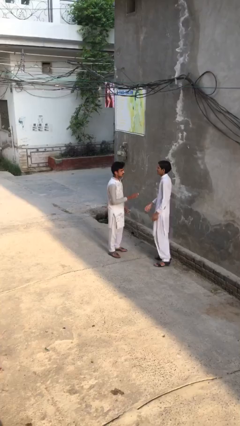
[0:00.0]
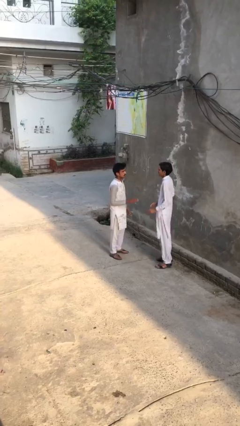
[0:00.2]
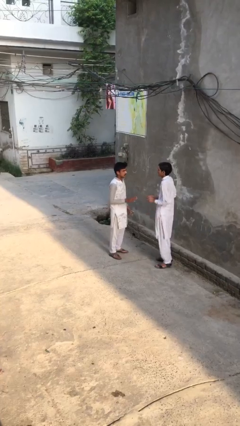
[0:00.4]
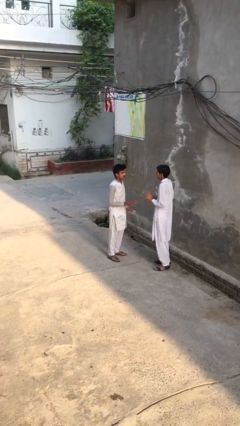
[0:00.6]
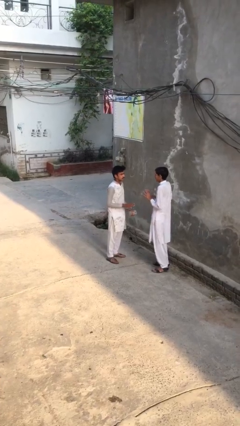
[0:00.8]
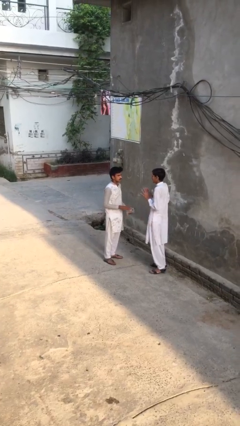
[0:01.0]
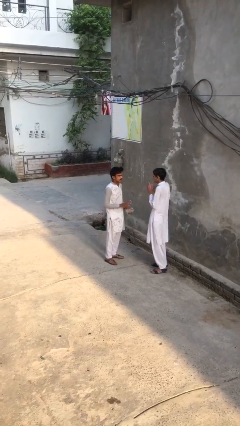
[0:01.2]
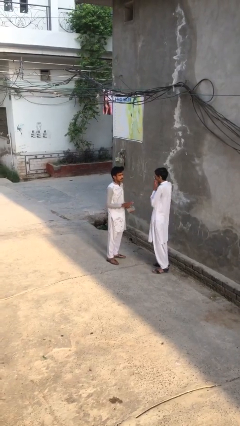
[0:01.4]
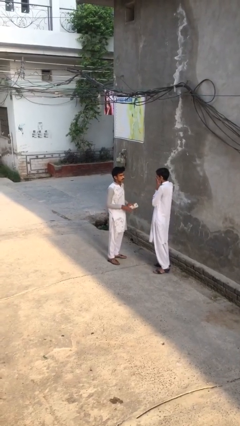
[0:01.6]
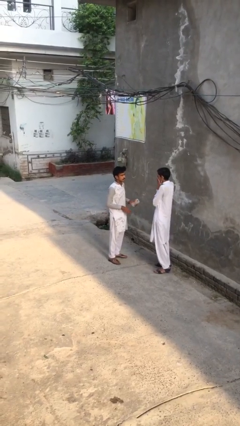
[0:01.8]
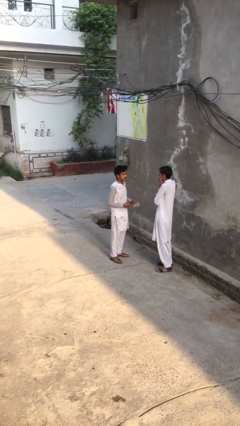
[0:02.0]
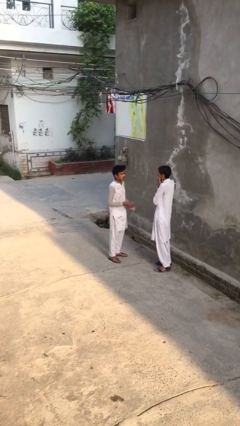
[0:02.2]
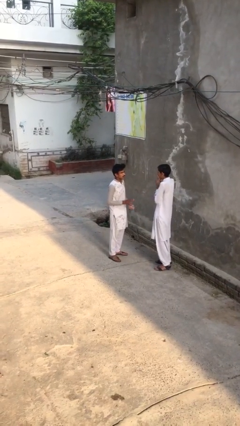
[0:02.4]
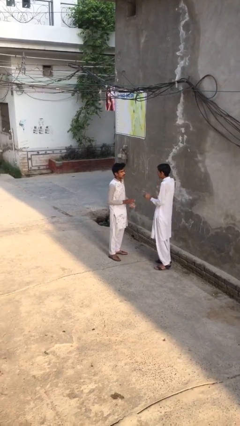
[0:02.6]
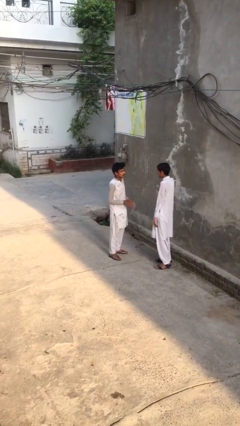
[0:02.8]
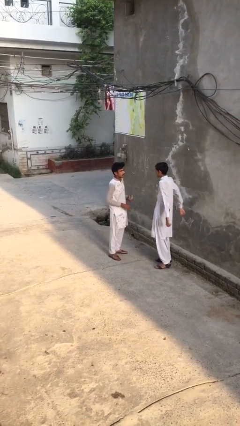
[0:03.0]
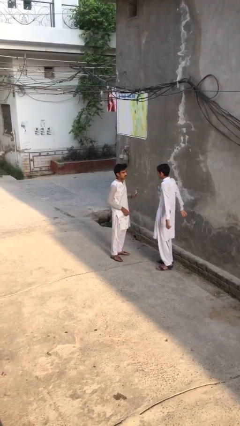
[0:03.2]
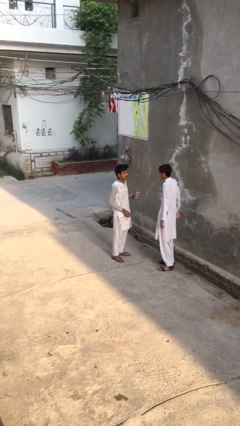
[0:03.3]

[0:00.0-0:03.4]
person talks to person

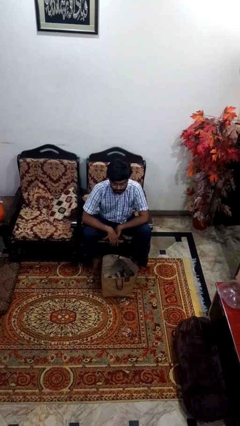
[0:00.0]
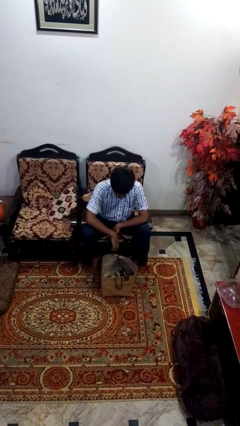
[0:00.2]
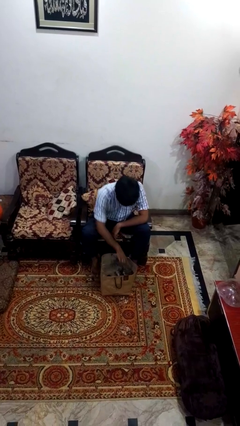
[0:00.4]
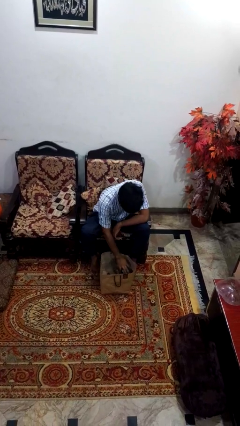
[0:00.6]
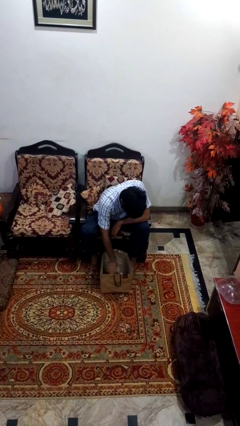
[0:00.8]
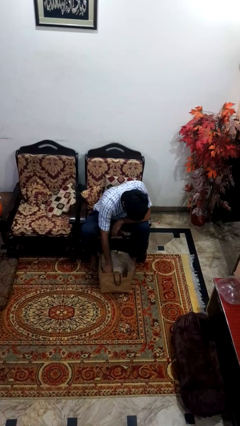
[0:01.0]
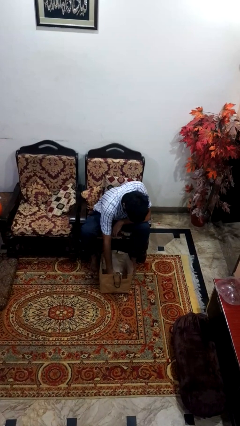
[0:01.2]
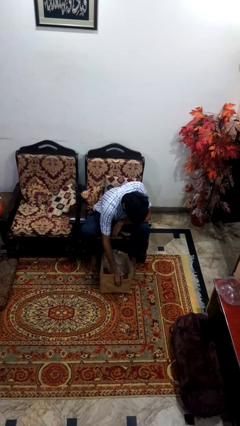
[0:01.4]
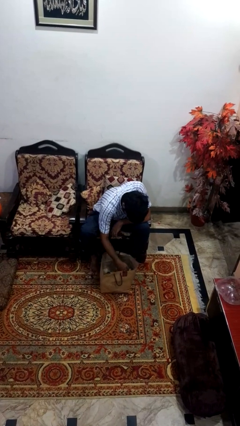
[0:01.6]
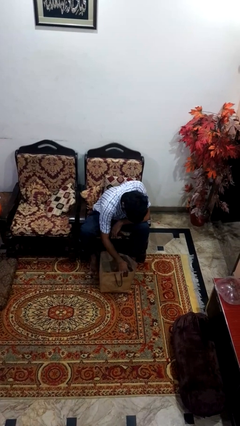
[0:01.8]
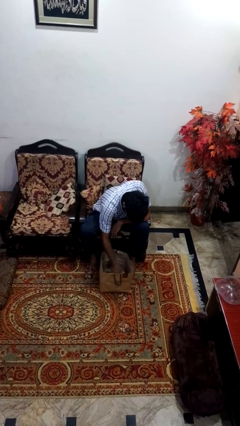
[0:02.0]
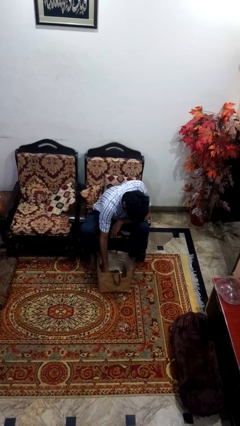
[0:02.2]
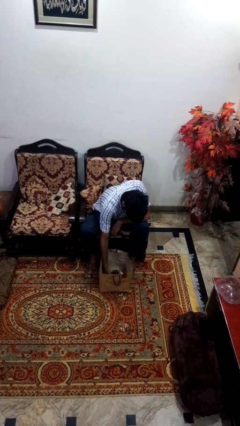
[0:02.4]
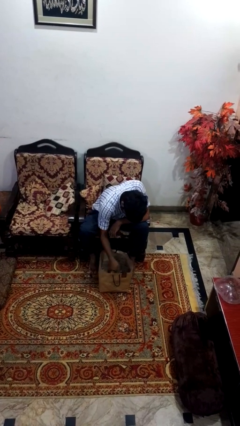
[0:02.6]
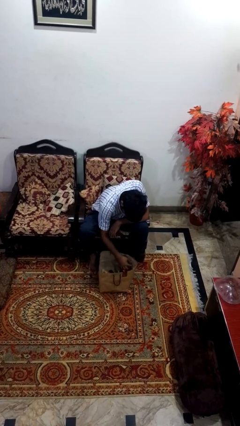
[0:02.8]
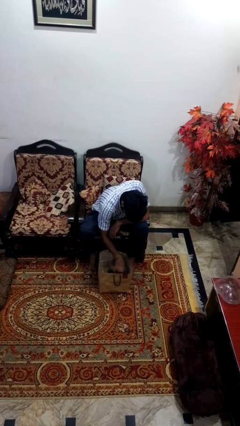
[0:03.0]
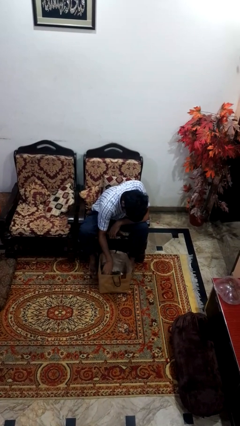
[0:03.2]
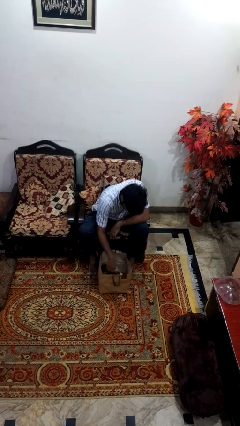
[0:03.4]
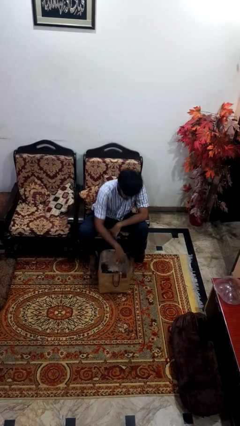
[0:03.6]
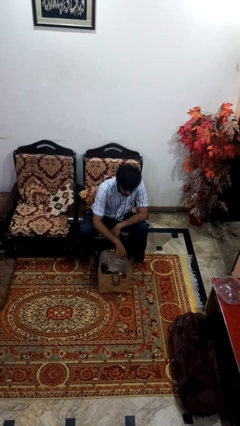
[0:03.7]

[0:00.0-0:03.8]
person searches in bag

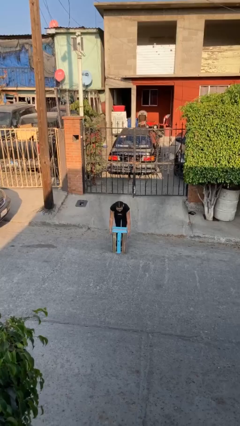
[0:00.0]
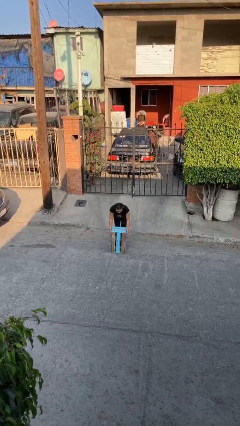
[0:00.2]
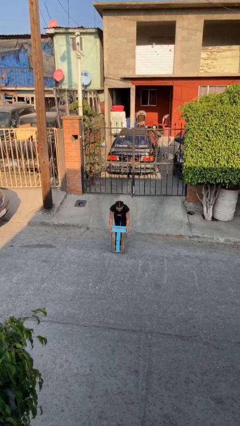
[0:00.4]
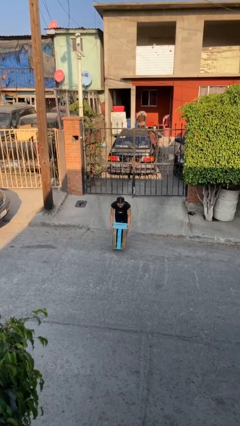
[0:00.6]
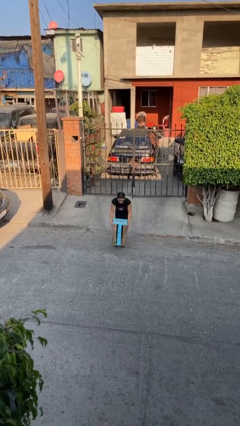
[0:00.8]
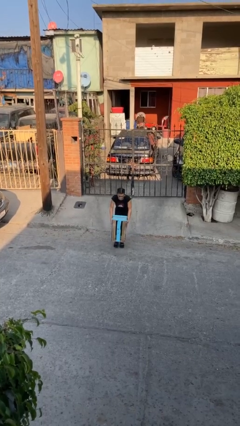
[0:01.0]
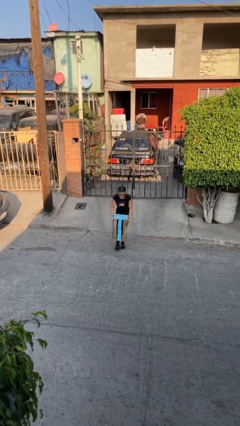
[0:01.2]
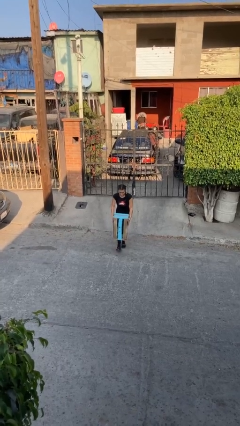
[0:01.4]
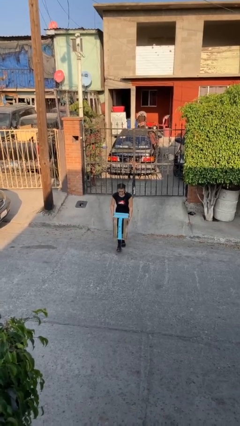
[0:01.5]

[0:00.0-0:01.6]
person picks up object from floor

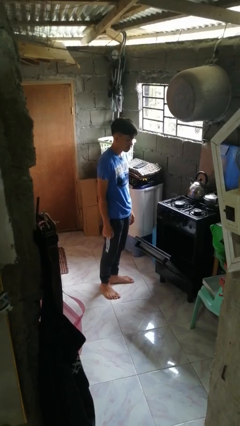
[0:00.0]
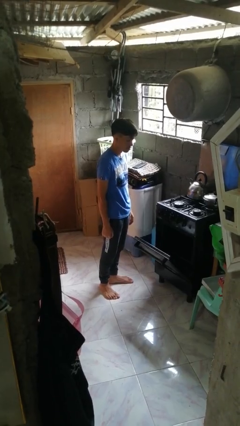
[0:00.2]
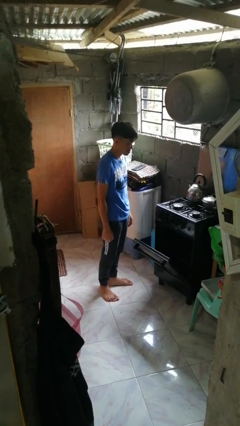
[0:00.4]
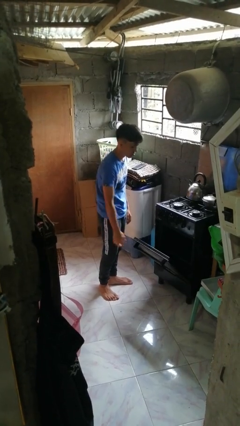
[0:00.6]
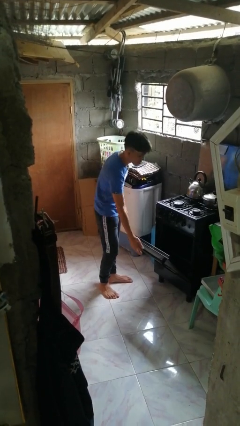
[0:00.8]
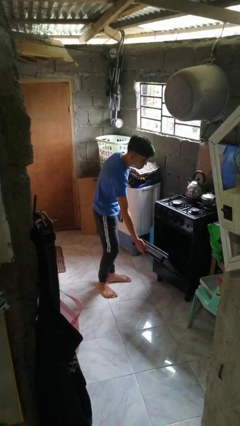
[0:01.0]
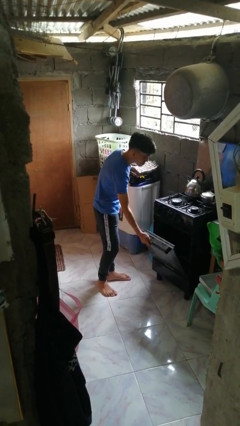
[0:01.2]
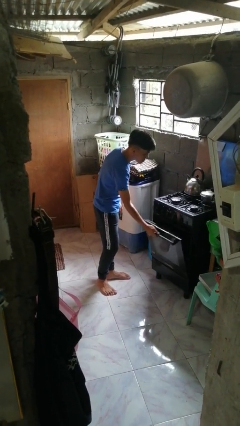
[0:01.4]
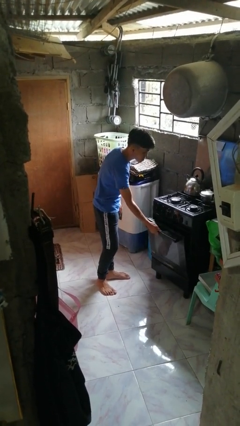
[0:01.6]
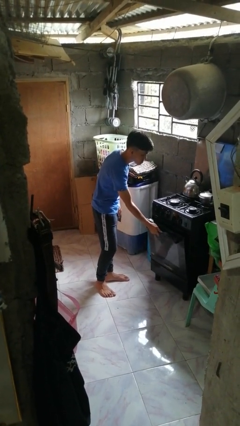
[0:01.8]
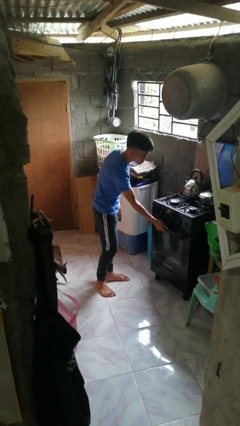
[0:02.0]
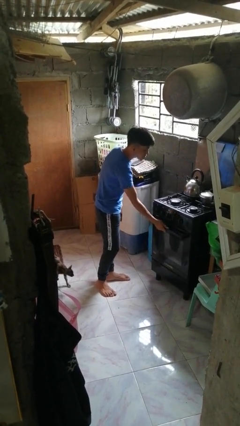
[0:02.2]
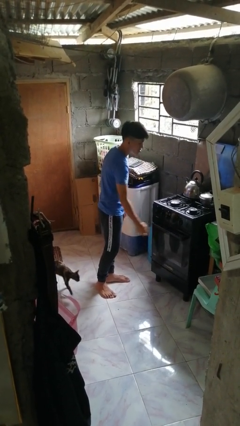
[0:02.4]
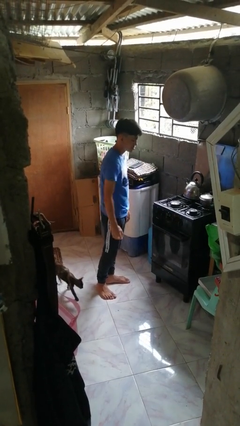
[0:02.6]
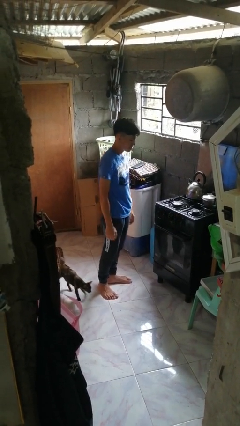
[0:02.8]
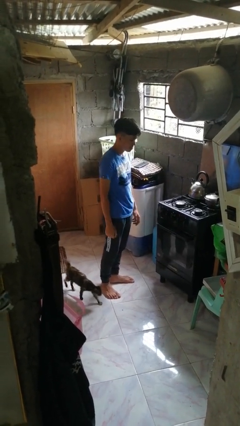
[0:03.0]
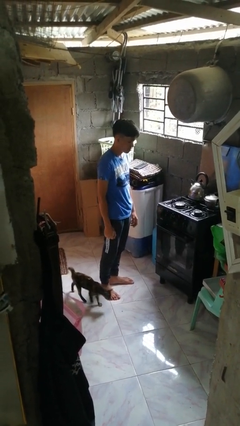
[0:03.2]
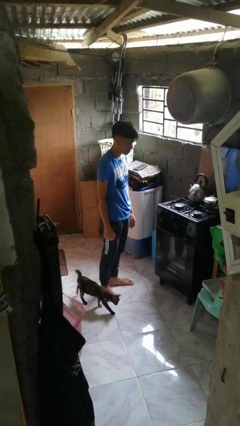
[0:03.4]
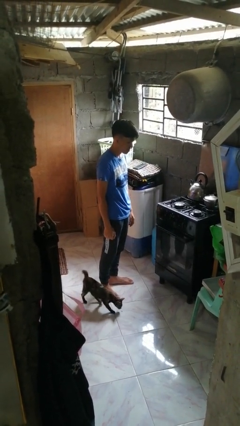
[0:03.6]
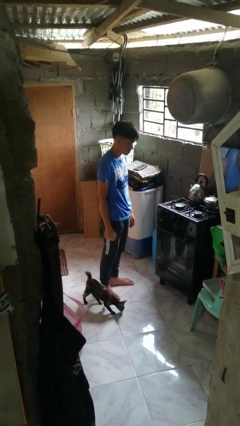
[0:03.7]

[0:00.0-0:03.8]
person closes oven door

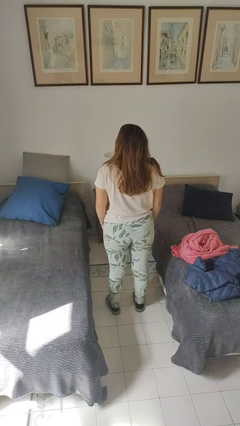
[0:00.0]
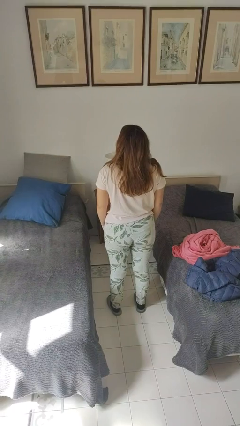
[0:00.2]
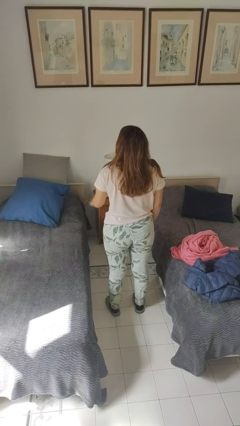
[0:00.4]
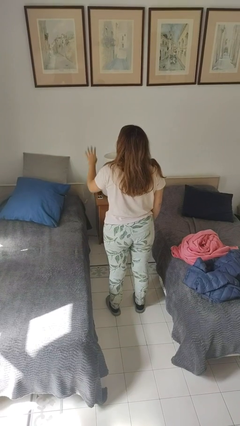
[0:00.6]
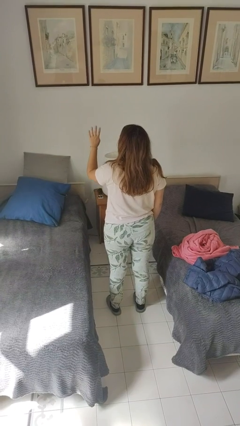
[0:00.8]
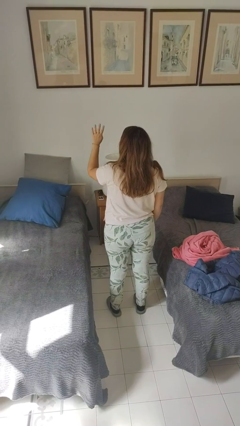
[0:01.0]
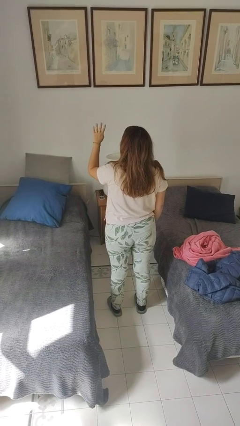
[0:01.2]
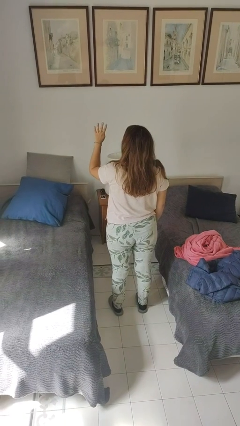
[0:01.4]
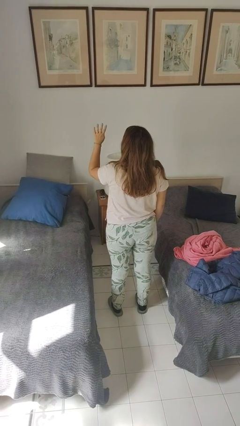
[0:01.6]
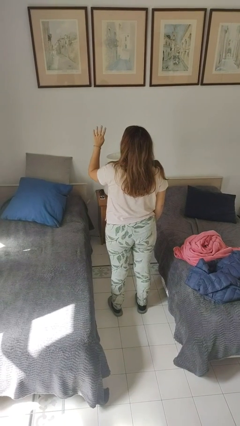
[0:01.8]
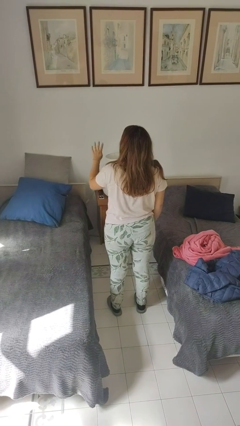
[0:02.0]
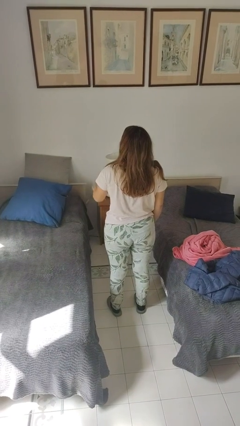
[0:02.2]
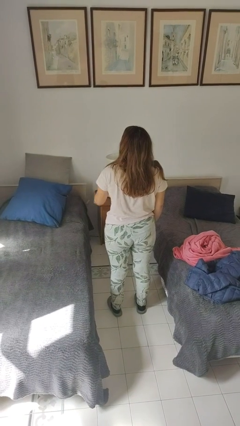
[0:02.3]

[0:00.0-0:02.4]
person gestures number four

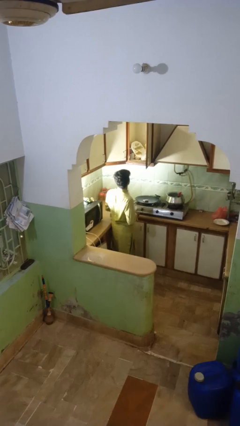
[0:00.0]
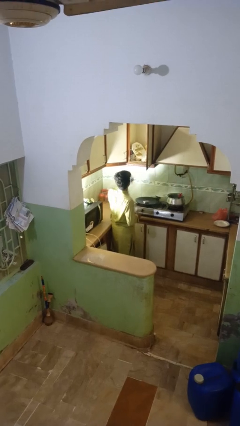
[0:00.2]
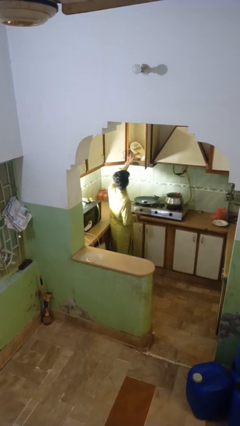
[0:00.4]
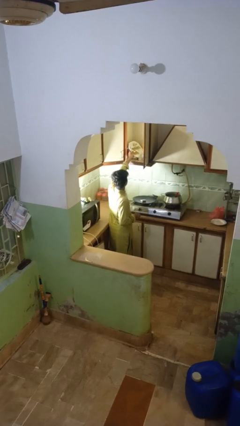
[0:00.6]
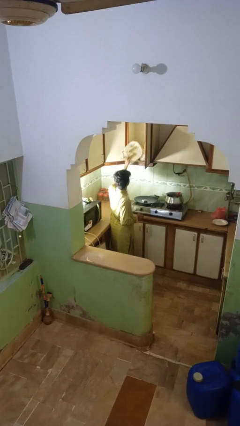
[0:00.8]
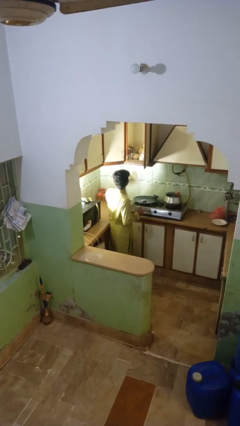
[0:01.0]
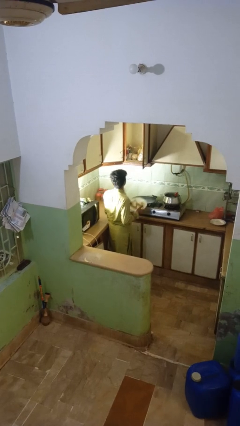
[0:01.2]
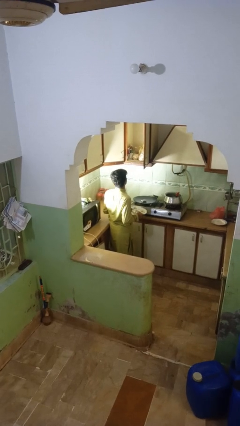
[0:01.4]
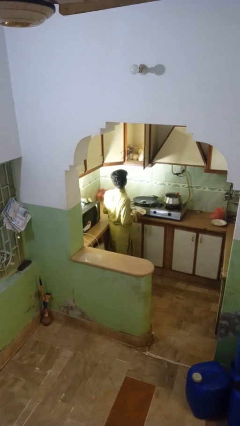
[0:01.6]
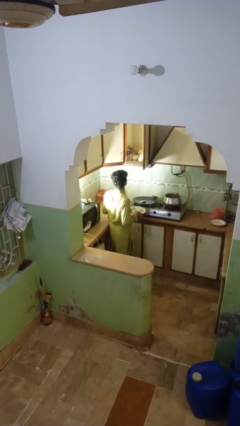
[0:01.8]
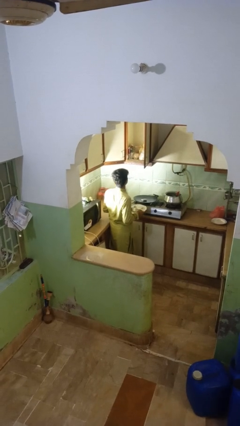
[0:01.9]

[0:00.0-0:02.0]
person takes object from cabinet

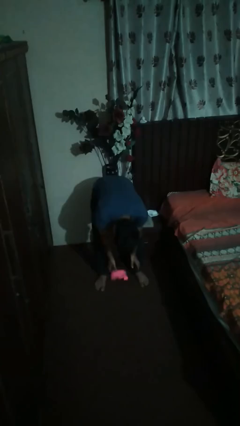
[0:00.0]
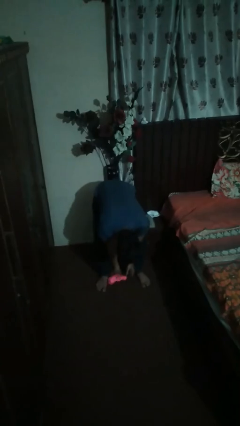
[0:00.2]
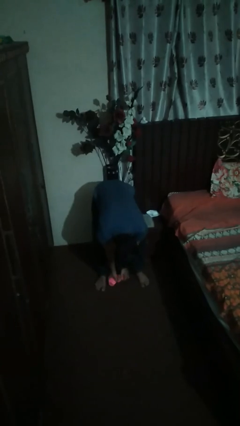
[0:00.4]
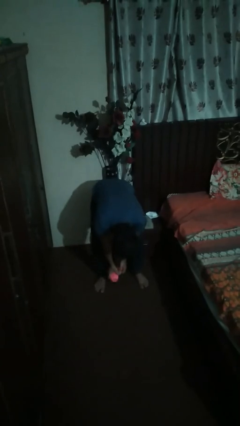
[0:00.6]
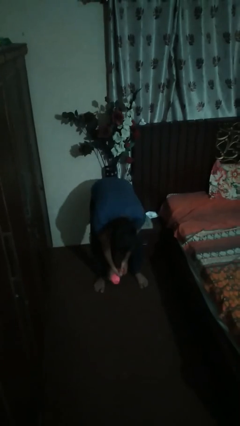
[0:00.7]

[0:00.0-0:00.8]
person catches dropped object
